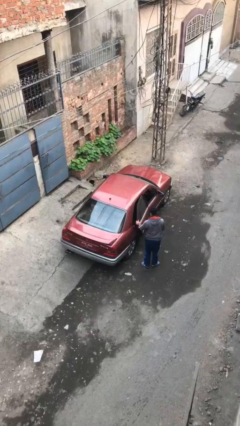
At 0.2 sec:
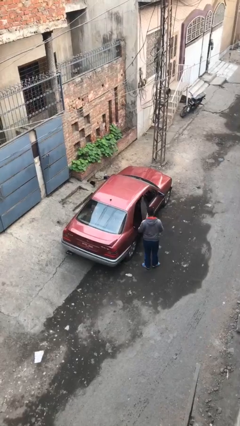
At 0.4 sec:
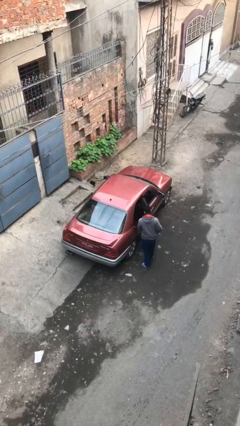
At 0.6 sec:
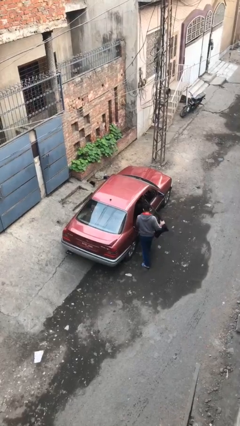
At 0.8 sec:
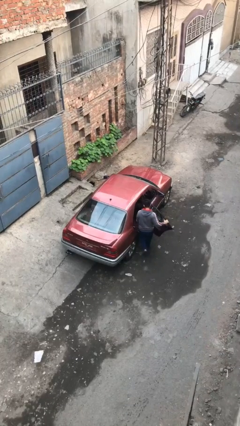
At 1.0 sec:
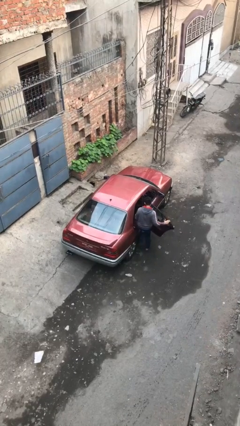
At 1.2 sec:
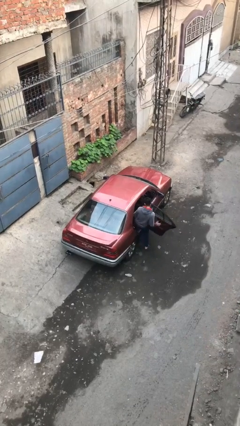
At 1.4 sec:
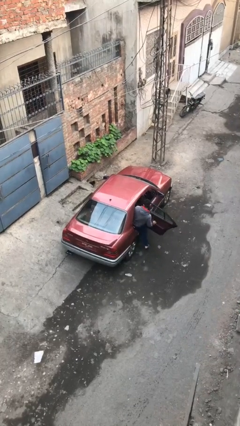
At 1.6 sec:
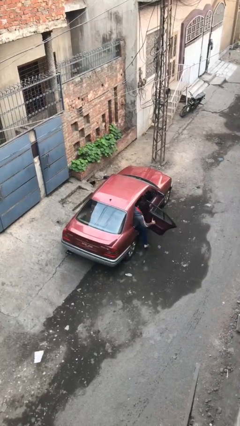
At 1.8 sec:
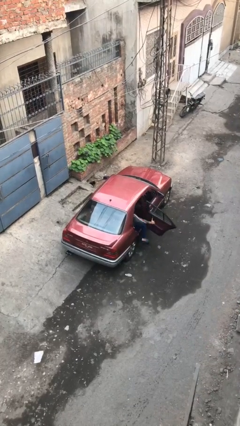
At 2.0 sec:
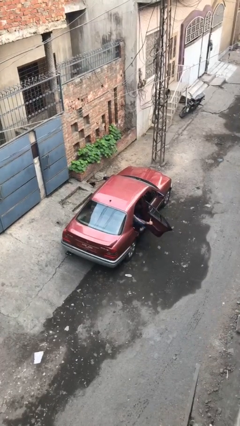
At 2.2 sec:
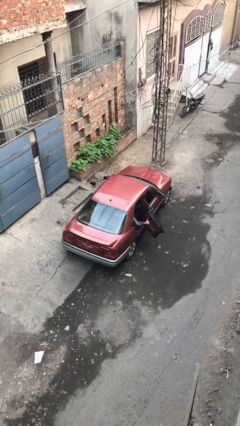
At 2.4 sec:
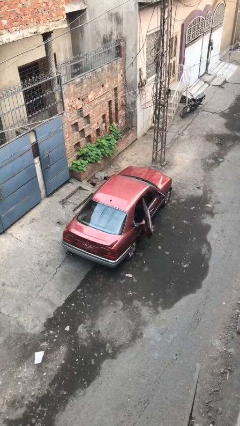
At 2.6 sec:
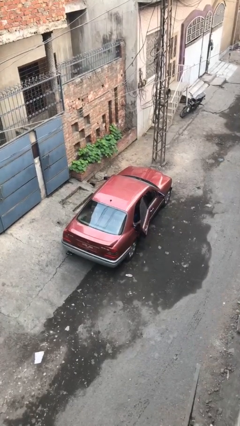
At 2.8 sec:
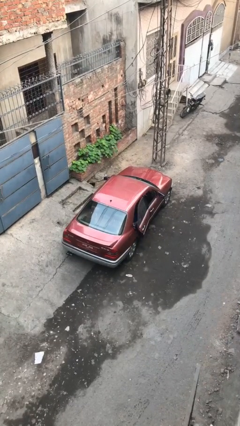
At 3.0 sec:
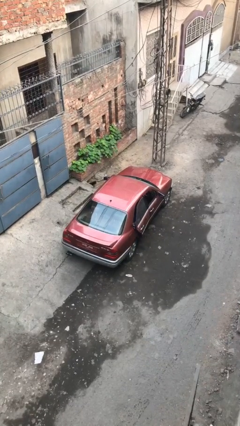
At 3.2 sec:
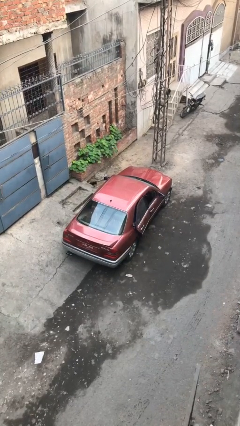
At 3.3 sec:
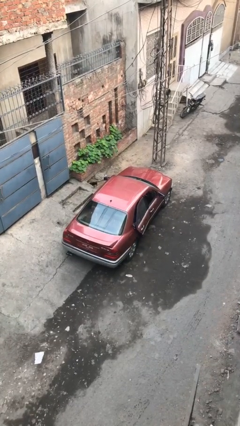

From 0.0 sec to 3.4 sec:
car picks up person

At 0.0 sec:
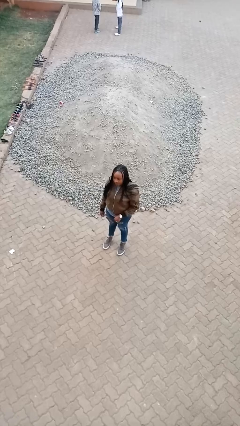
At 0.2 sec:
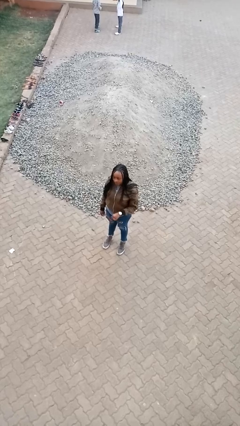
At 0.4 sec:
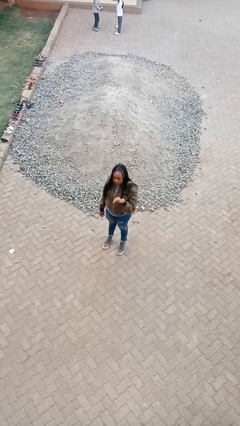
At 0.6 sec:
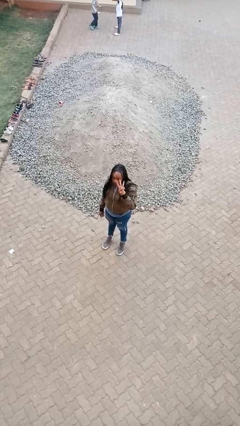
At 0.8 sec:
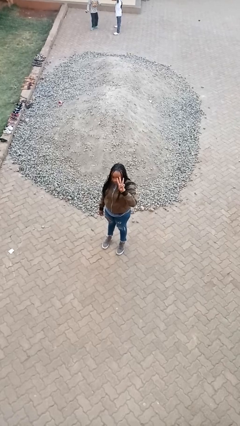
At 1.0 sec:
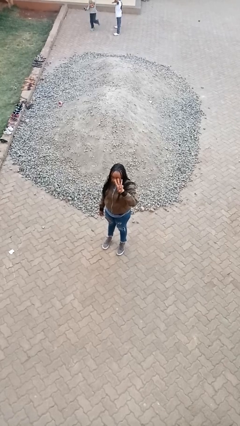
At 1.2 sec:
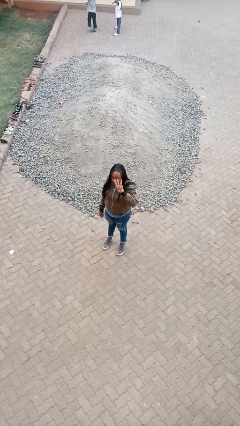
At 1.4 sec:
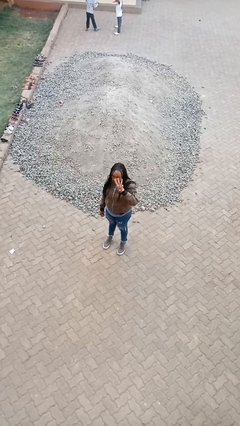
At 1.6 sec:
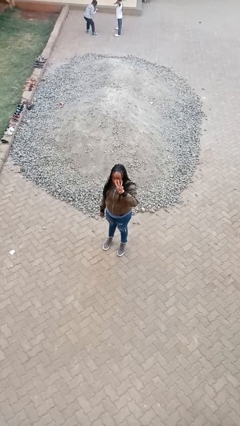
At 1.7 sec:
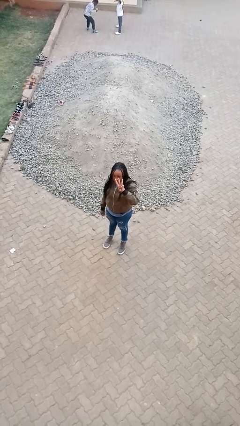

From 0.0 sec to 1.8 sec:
person gestures number three

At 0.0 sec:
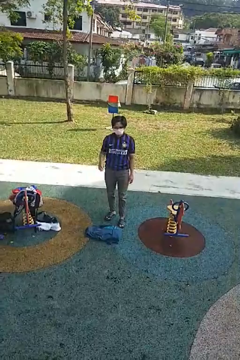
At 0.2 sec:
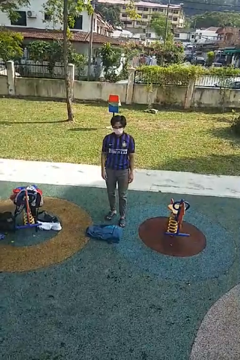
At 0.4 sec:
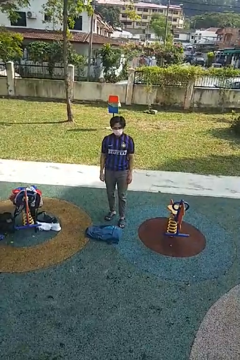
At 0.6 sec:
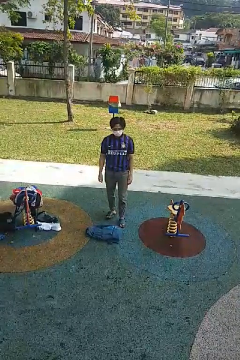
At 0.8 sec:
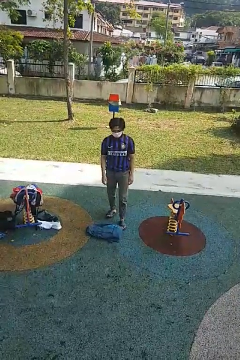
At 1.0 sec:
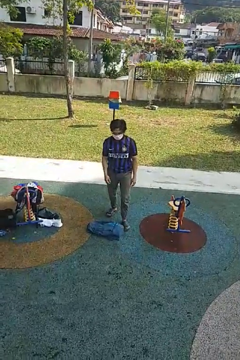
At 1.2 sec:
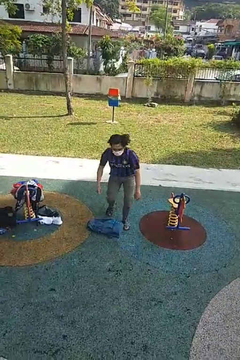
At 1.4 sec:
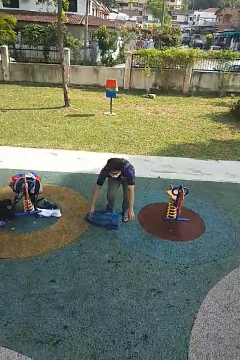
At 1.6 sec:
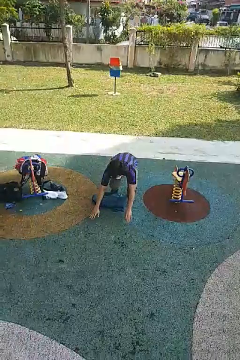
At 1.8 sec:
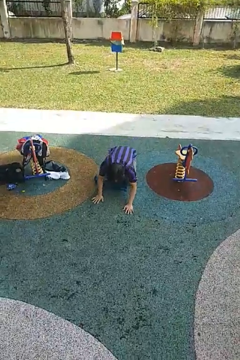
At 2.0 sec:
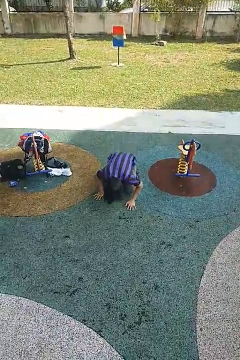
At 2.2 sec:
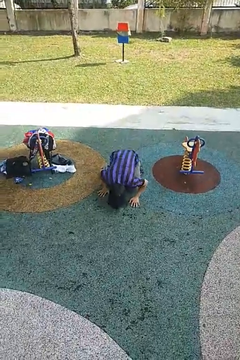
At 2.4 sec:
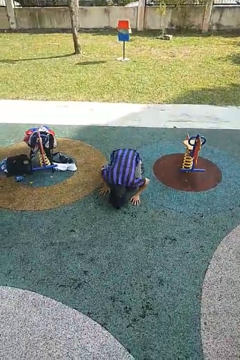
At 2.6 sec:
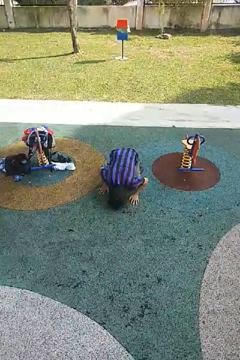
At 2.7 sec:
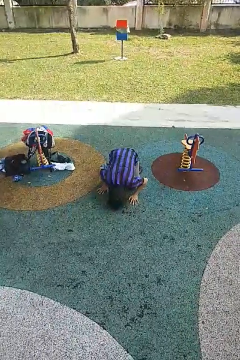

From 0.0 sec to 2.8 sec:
person trips on object on floor

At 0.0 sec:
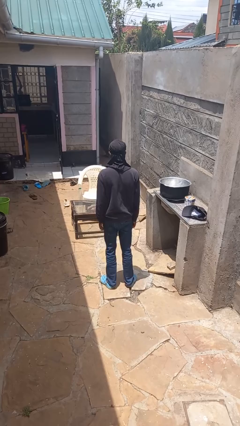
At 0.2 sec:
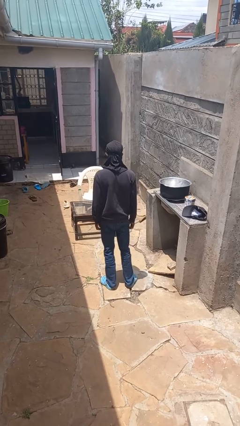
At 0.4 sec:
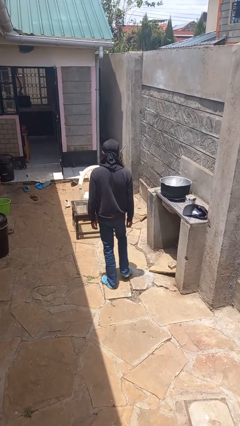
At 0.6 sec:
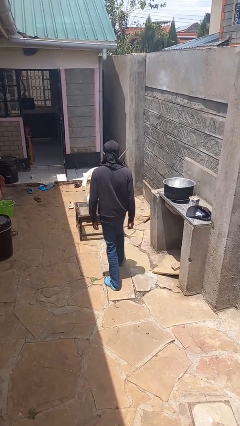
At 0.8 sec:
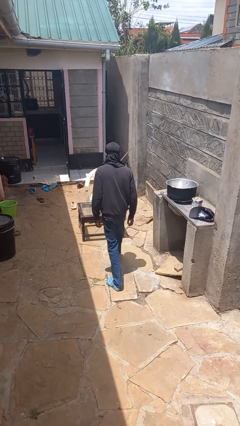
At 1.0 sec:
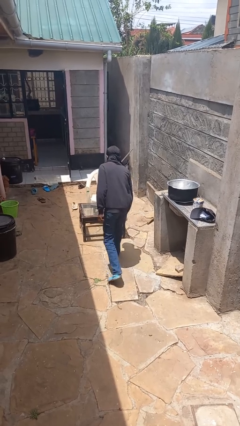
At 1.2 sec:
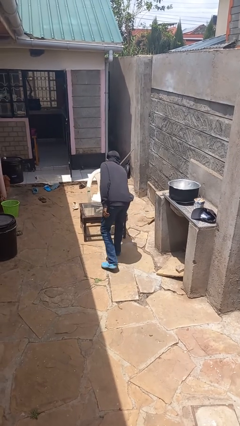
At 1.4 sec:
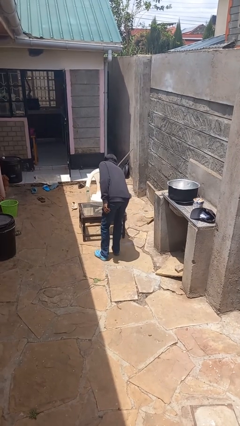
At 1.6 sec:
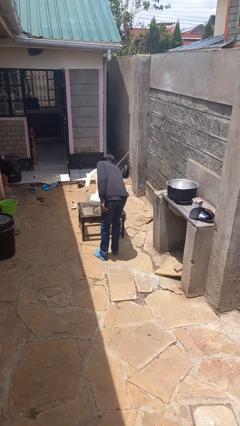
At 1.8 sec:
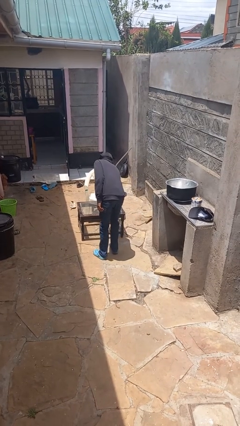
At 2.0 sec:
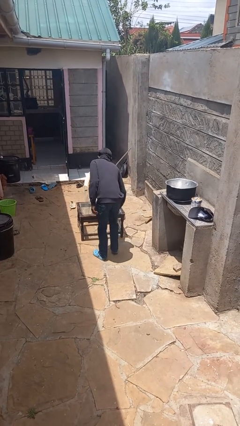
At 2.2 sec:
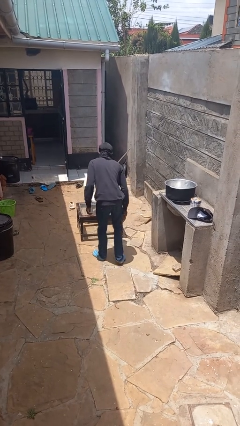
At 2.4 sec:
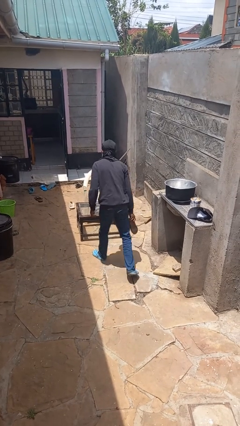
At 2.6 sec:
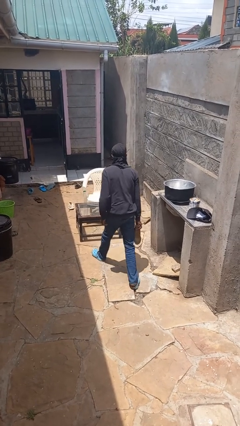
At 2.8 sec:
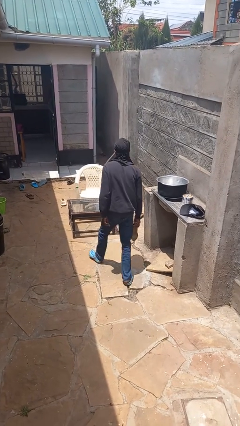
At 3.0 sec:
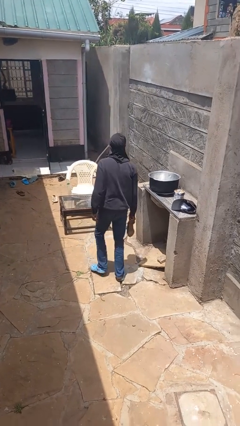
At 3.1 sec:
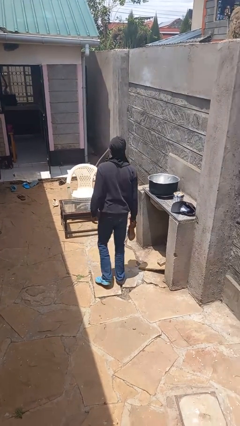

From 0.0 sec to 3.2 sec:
person picks up object from table

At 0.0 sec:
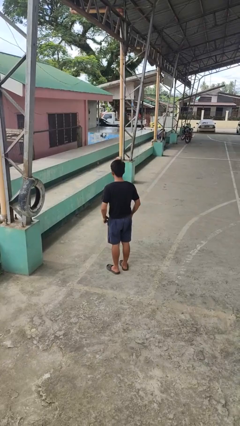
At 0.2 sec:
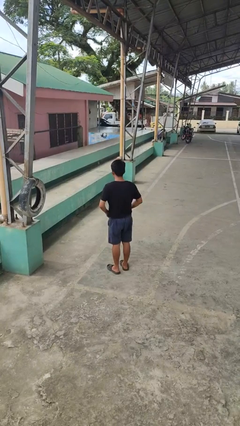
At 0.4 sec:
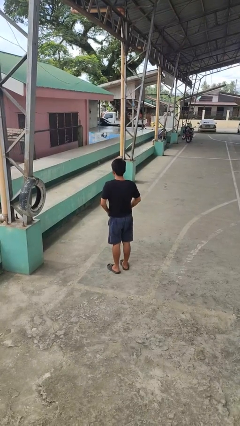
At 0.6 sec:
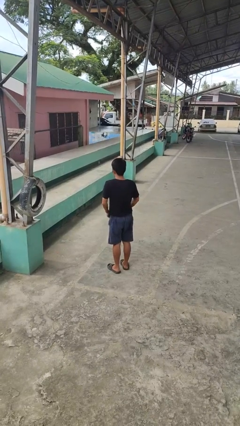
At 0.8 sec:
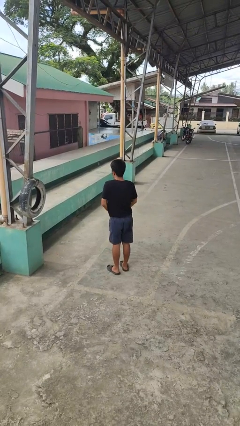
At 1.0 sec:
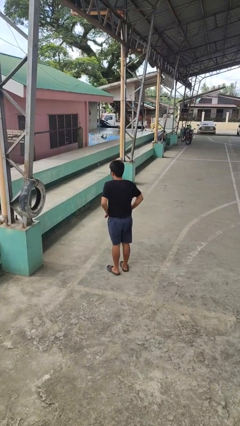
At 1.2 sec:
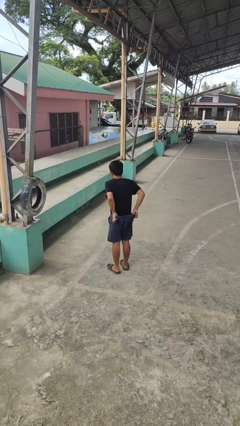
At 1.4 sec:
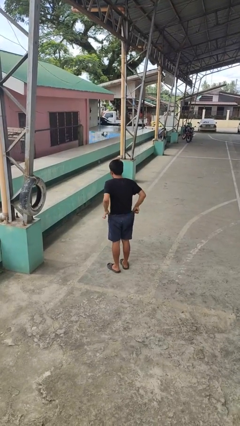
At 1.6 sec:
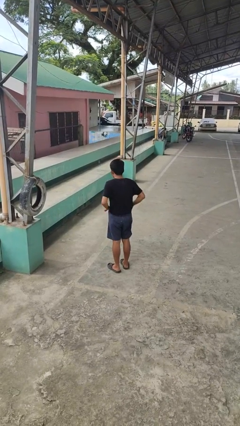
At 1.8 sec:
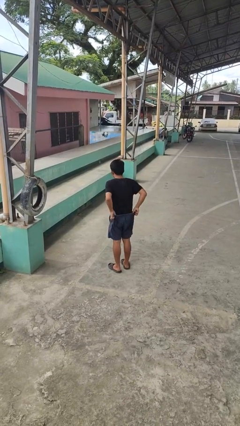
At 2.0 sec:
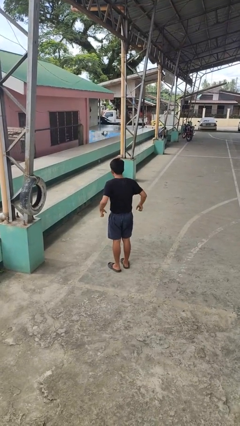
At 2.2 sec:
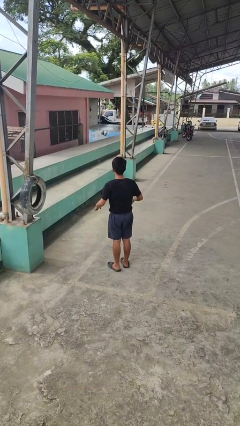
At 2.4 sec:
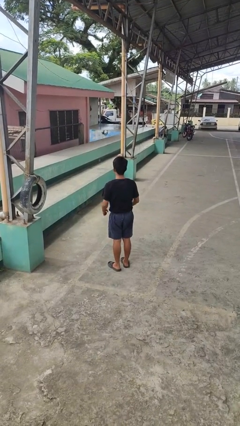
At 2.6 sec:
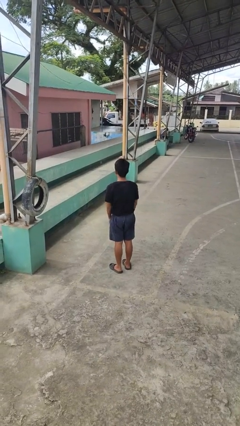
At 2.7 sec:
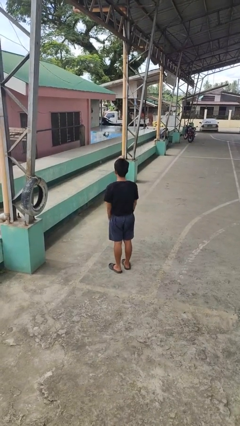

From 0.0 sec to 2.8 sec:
person hikes up pants

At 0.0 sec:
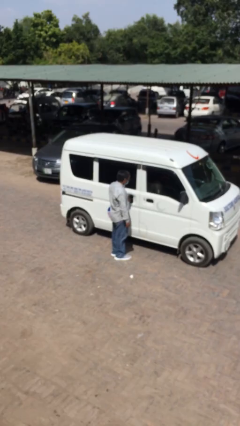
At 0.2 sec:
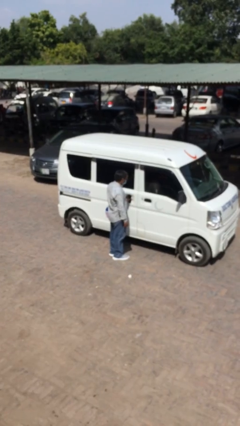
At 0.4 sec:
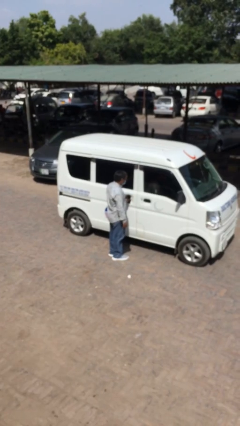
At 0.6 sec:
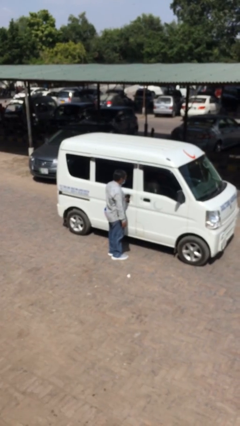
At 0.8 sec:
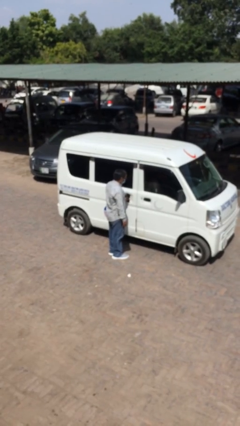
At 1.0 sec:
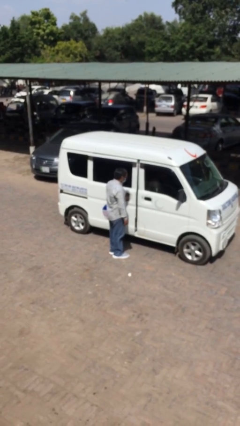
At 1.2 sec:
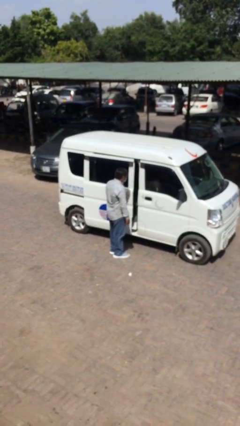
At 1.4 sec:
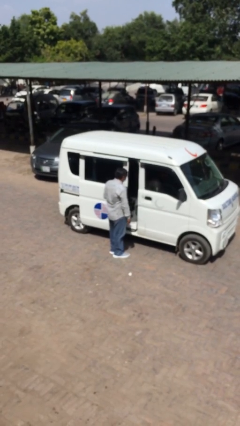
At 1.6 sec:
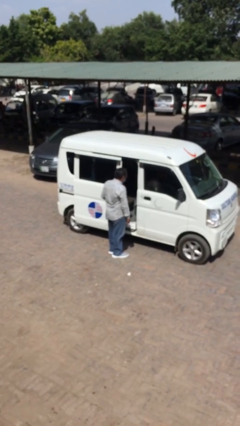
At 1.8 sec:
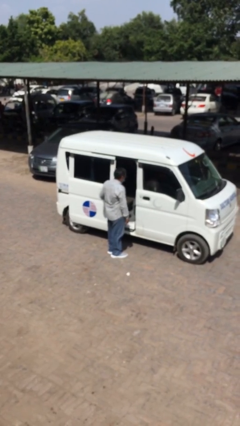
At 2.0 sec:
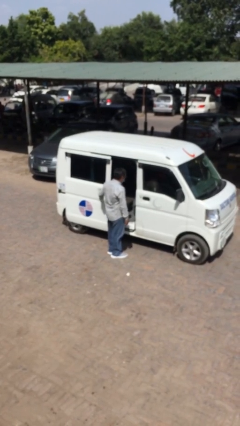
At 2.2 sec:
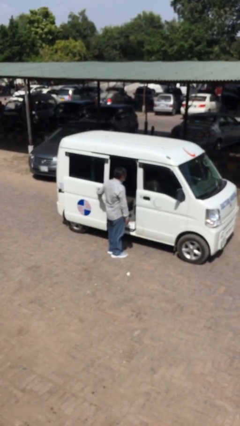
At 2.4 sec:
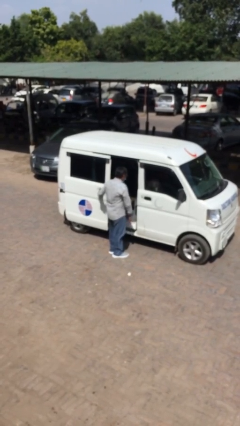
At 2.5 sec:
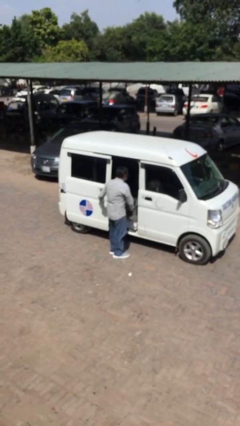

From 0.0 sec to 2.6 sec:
person opens car door

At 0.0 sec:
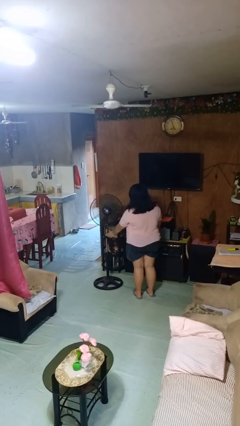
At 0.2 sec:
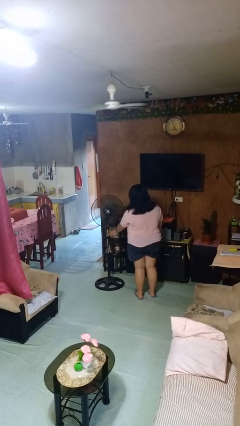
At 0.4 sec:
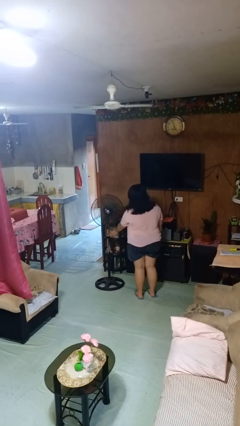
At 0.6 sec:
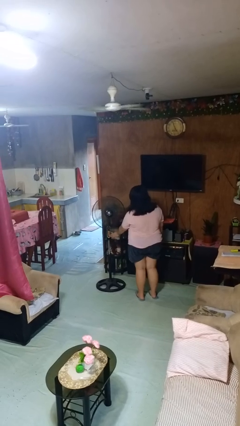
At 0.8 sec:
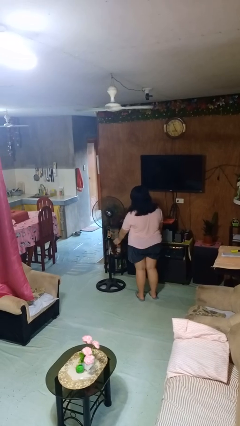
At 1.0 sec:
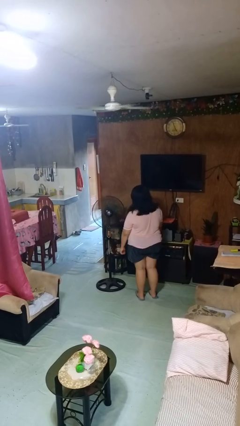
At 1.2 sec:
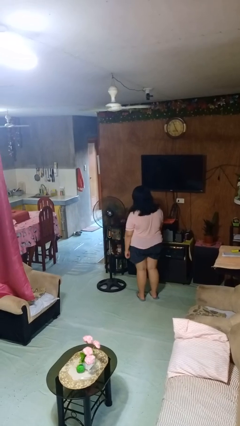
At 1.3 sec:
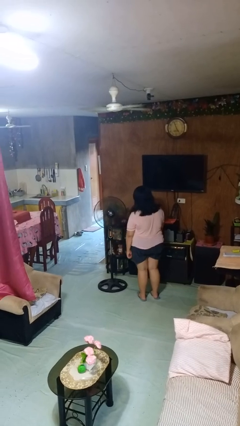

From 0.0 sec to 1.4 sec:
person turns off fan
